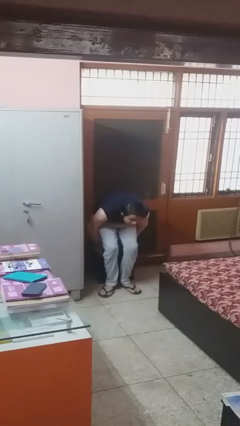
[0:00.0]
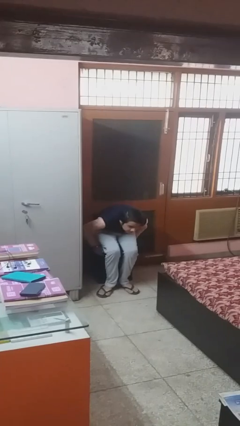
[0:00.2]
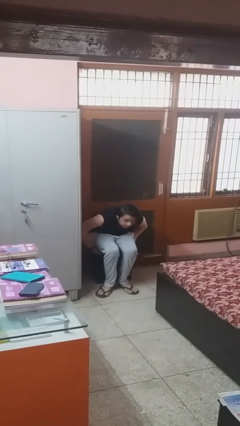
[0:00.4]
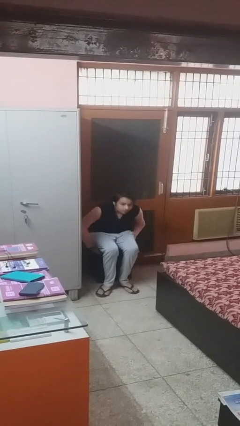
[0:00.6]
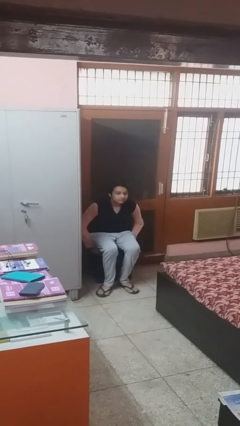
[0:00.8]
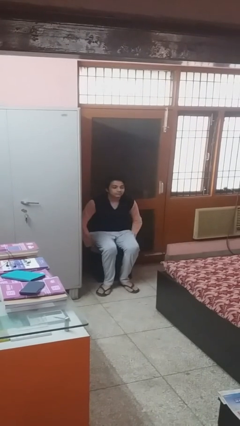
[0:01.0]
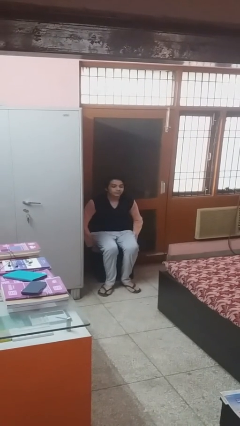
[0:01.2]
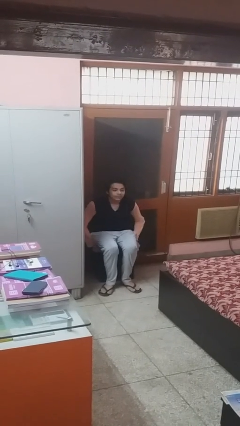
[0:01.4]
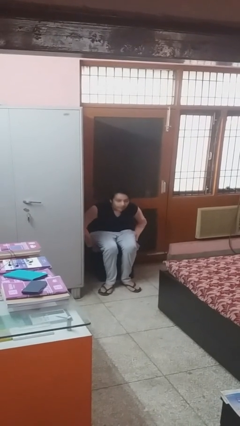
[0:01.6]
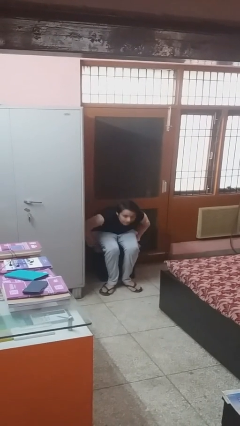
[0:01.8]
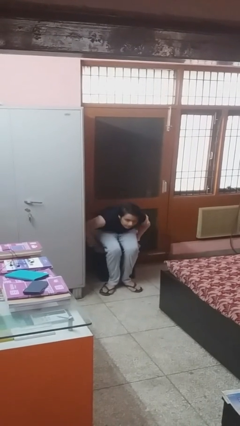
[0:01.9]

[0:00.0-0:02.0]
person sits down

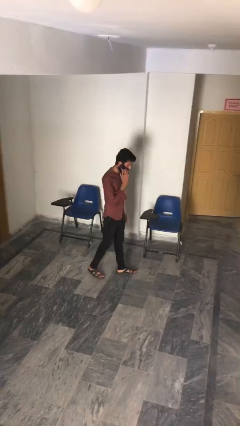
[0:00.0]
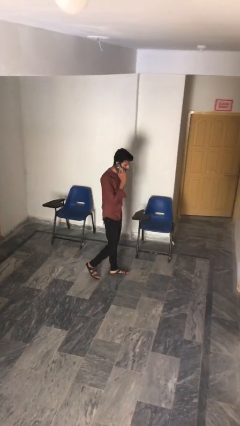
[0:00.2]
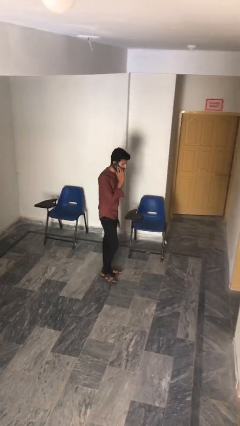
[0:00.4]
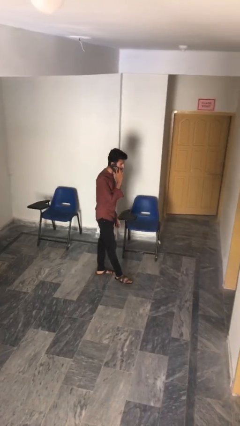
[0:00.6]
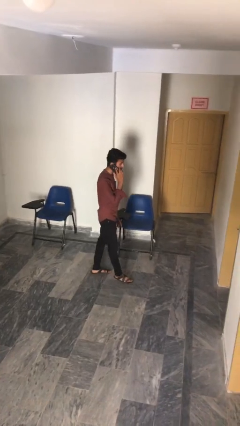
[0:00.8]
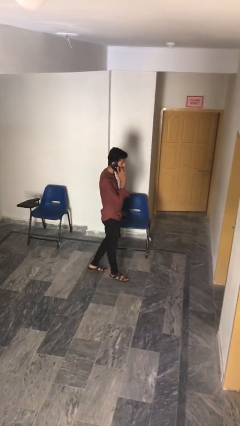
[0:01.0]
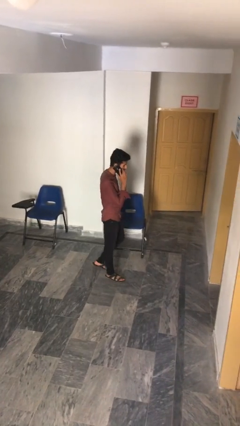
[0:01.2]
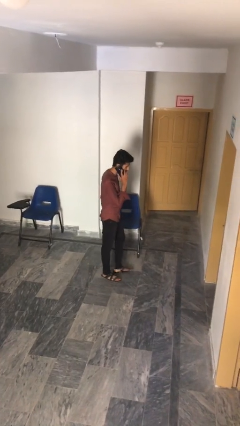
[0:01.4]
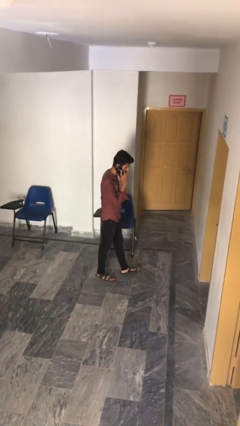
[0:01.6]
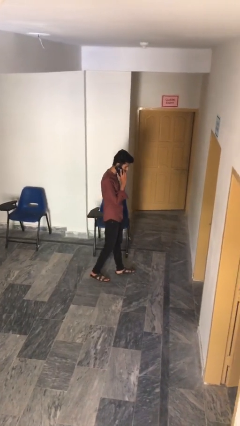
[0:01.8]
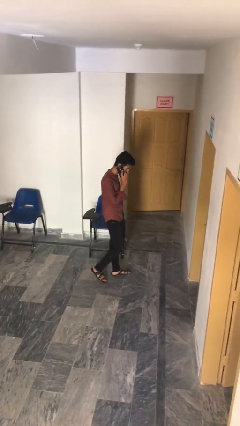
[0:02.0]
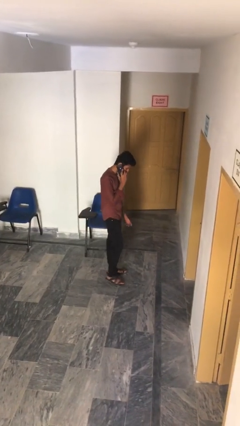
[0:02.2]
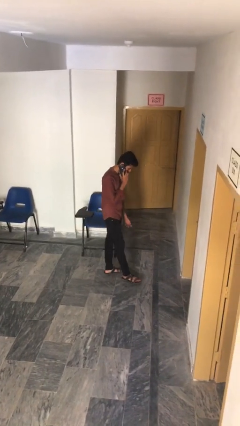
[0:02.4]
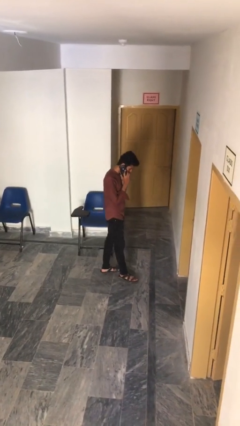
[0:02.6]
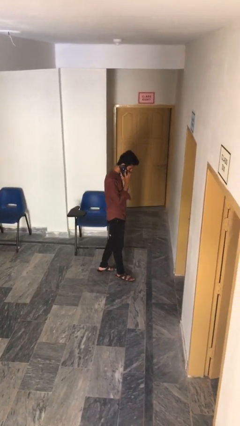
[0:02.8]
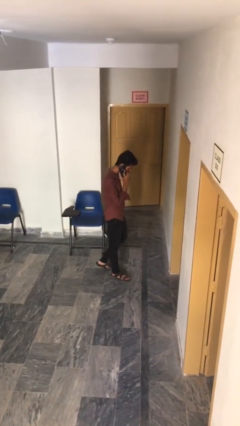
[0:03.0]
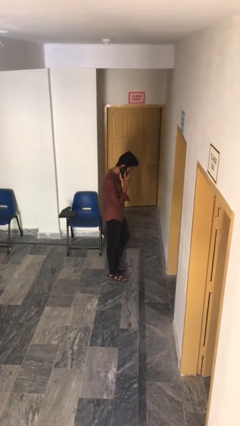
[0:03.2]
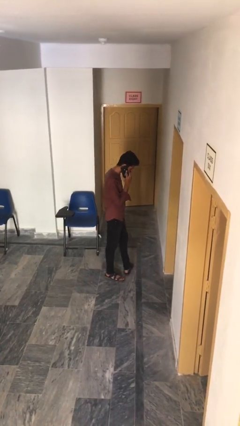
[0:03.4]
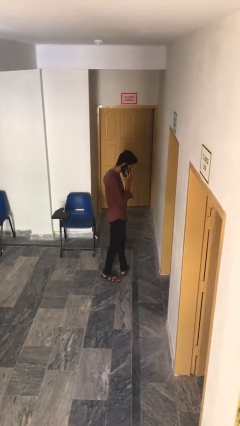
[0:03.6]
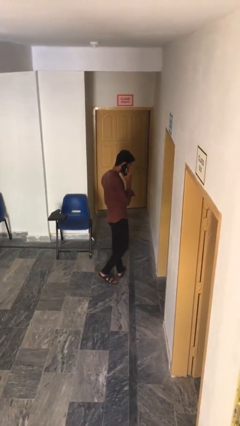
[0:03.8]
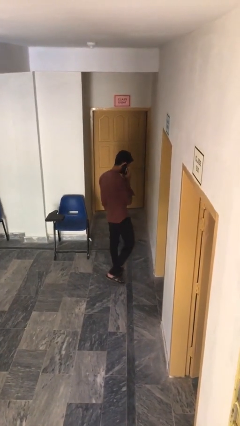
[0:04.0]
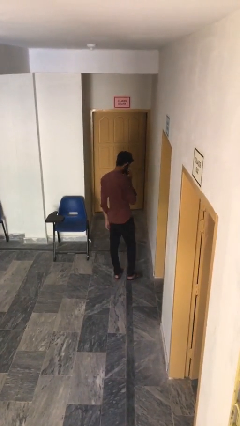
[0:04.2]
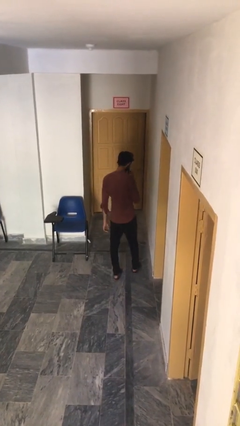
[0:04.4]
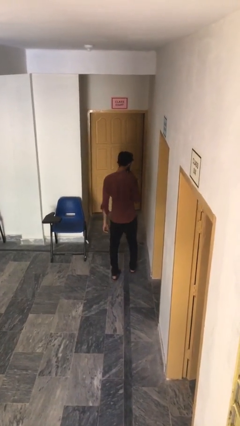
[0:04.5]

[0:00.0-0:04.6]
person talks on phone

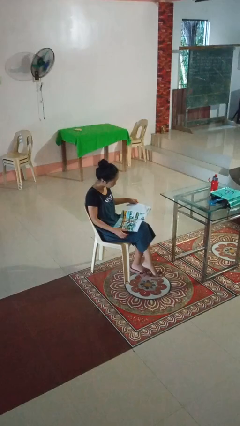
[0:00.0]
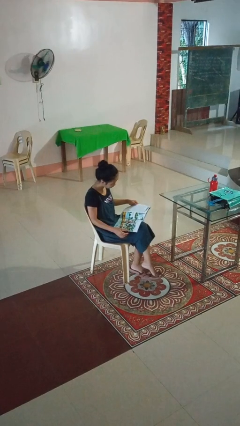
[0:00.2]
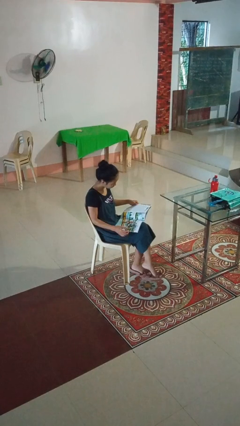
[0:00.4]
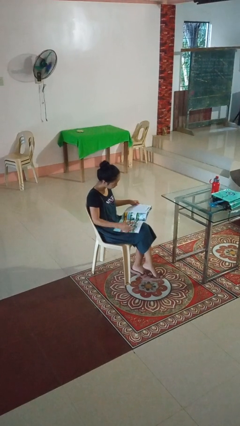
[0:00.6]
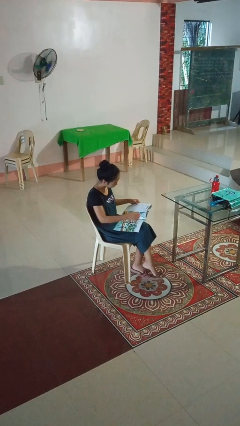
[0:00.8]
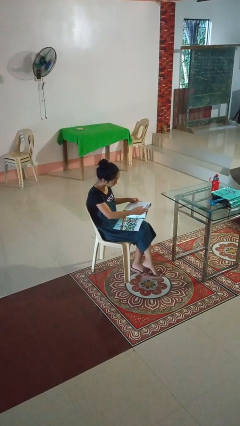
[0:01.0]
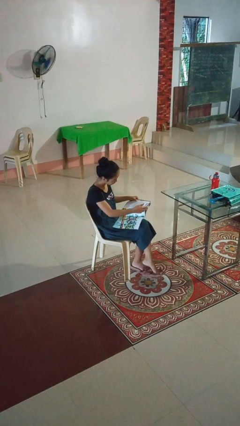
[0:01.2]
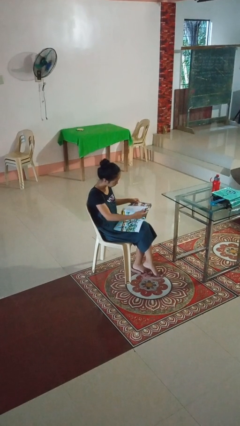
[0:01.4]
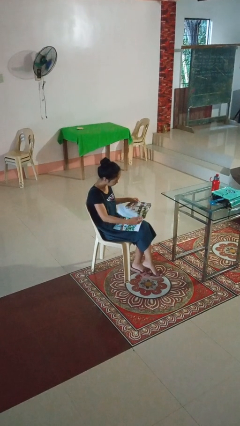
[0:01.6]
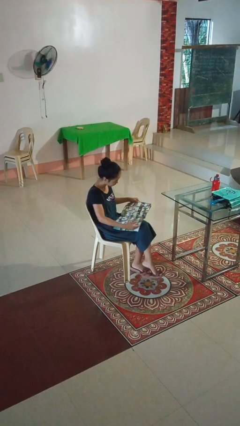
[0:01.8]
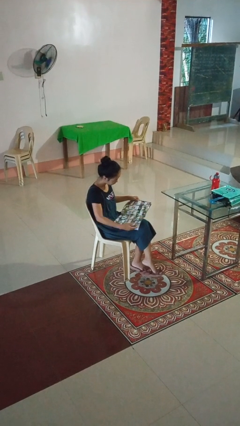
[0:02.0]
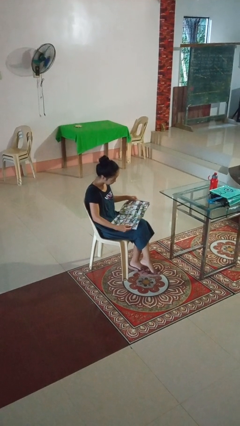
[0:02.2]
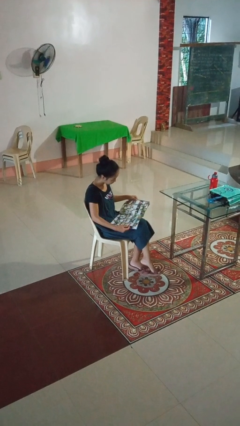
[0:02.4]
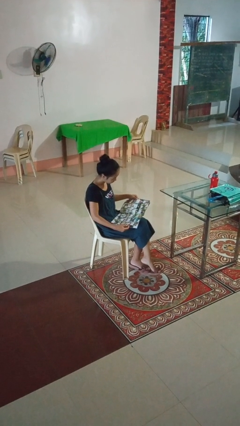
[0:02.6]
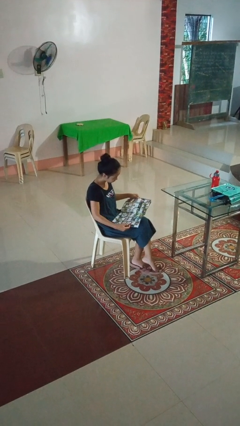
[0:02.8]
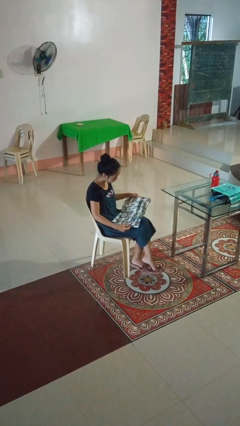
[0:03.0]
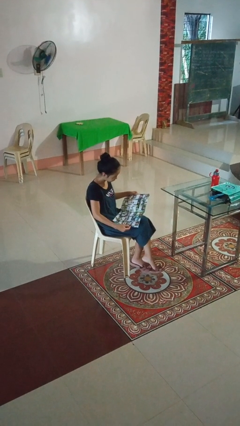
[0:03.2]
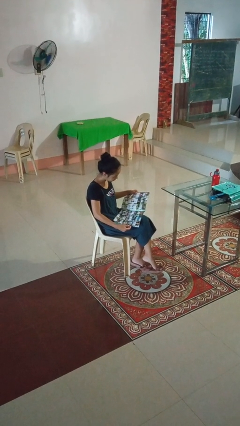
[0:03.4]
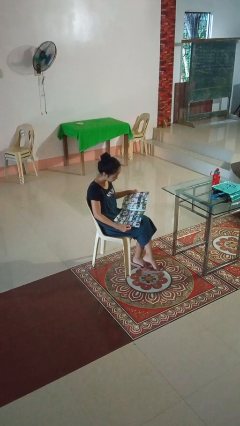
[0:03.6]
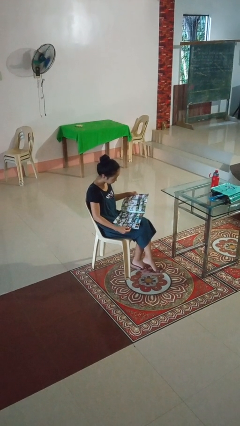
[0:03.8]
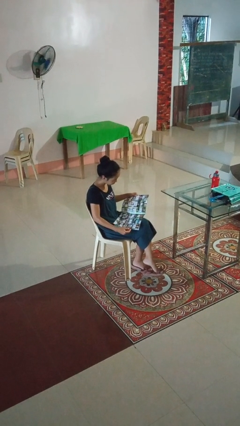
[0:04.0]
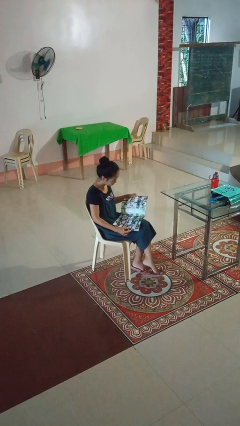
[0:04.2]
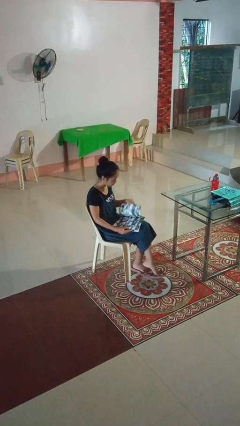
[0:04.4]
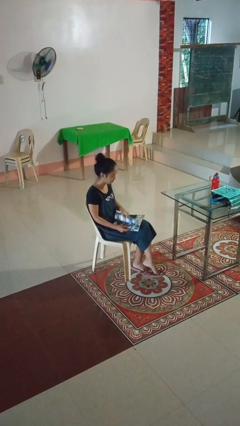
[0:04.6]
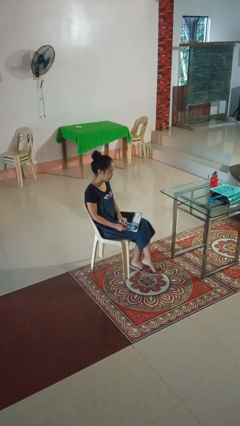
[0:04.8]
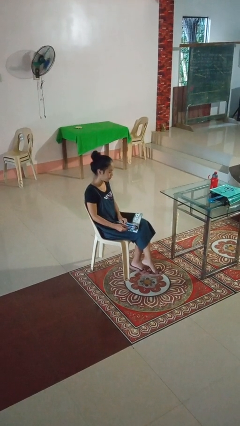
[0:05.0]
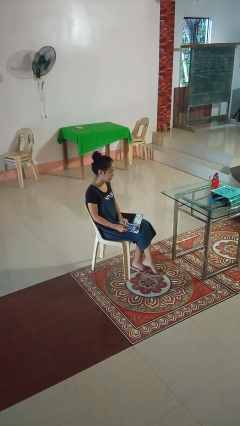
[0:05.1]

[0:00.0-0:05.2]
person reads magazine

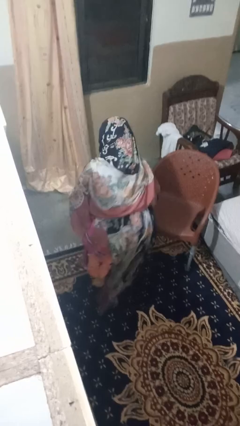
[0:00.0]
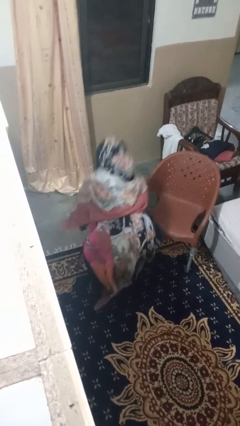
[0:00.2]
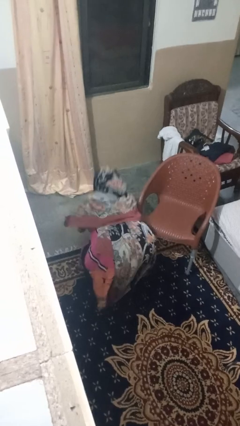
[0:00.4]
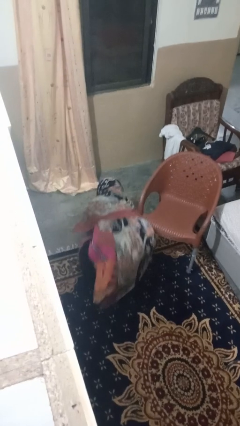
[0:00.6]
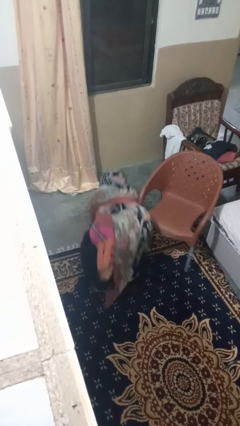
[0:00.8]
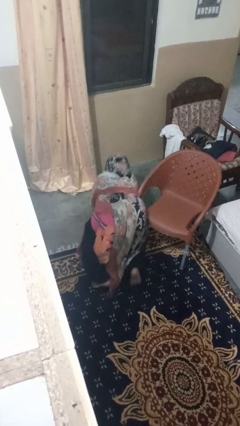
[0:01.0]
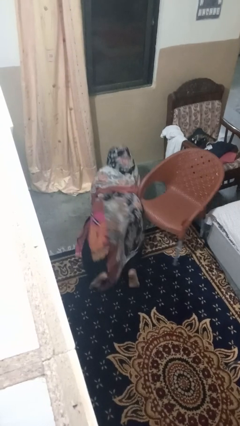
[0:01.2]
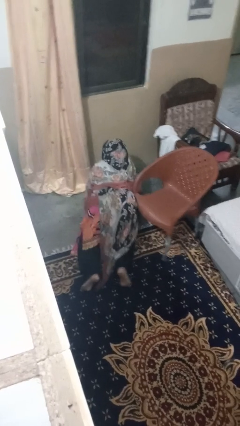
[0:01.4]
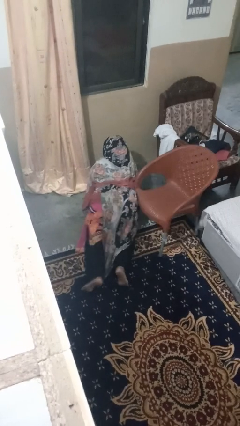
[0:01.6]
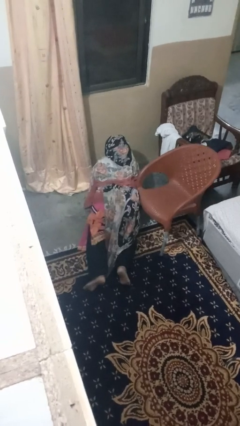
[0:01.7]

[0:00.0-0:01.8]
person lies down on floor

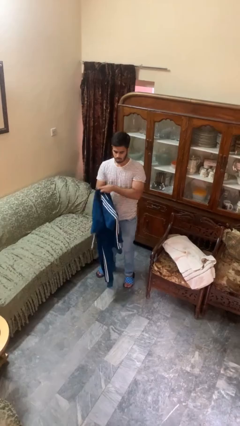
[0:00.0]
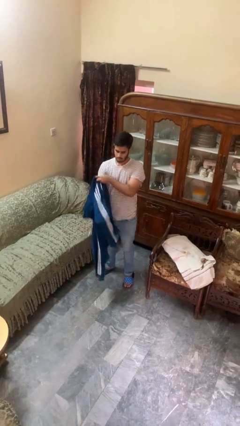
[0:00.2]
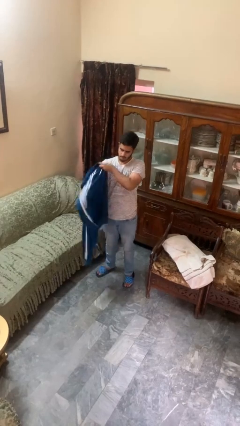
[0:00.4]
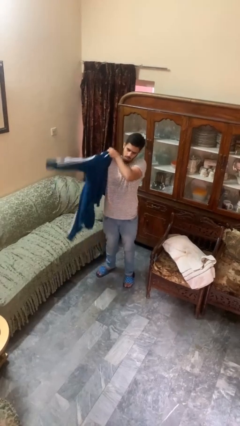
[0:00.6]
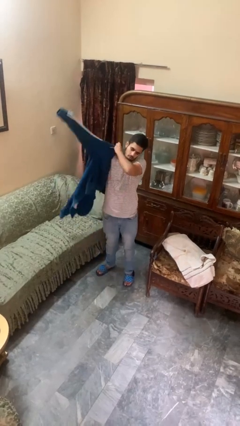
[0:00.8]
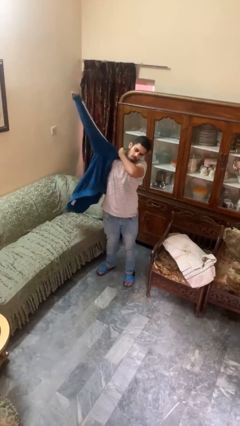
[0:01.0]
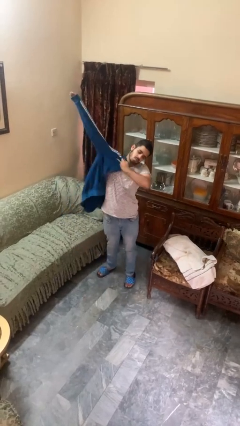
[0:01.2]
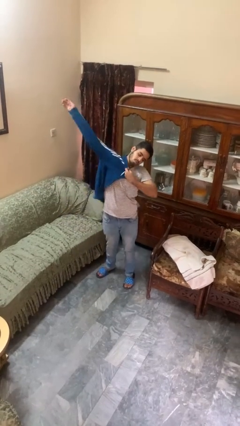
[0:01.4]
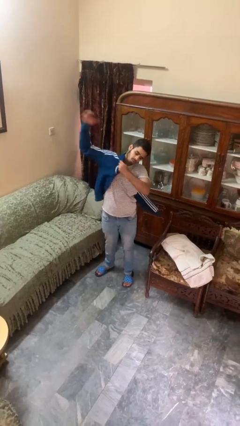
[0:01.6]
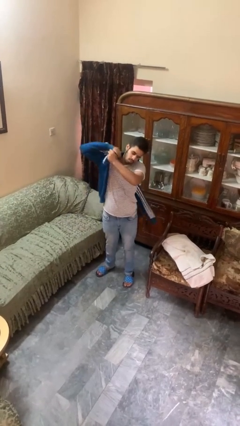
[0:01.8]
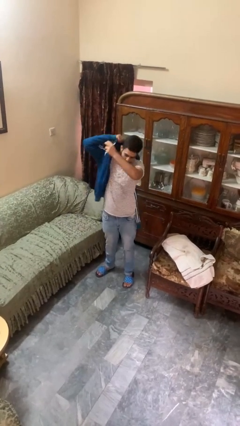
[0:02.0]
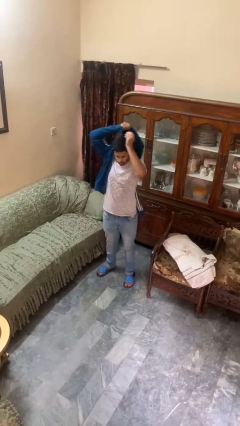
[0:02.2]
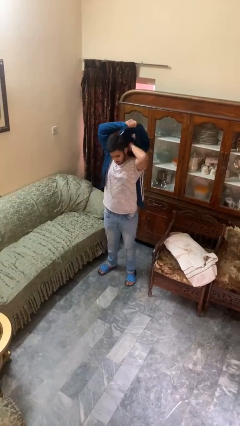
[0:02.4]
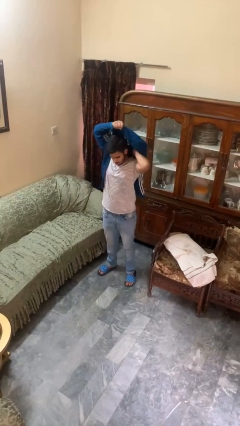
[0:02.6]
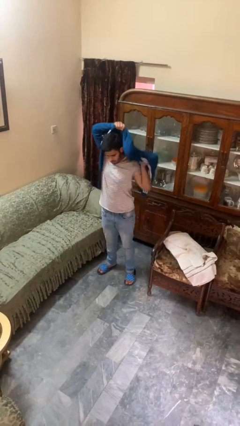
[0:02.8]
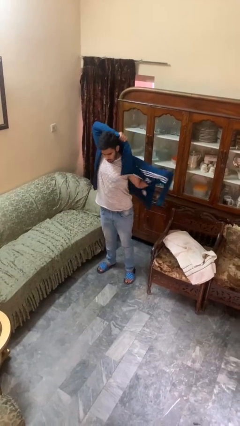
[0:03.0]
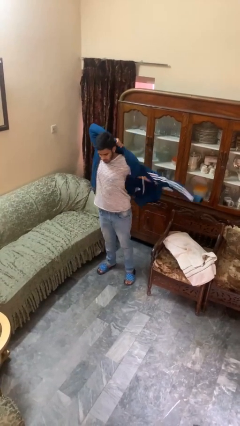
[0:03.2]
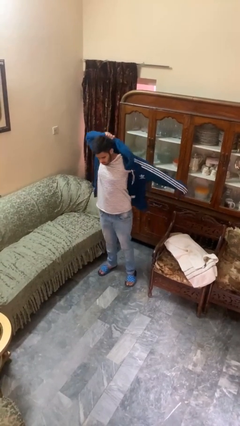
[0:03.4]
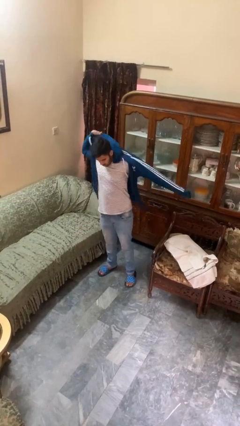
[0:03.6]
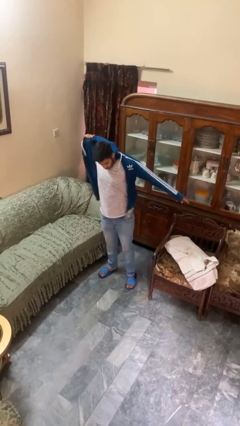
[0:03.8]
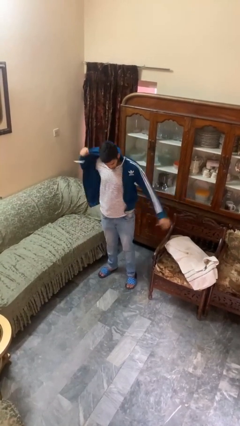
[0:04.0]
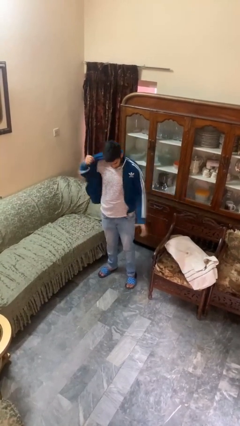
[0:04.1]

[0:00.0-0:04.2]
person puts on hoodie
